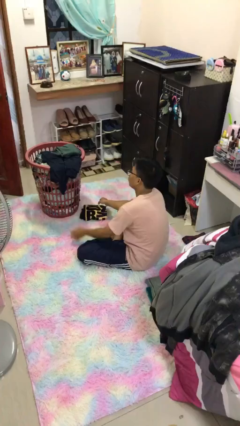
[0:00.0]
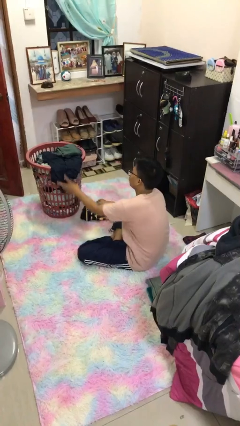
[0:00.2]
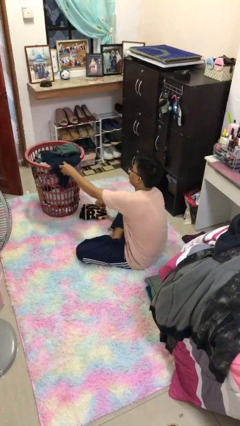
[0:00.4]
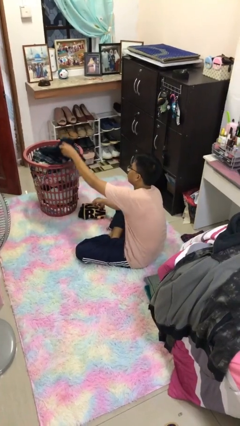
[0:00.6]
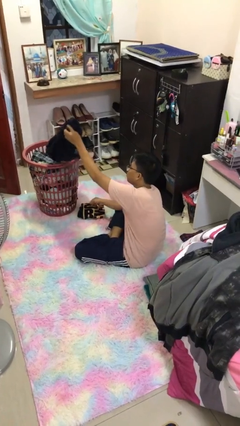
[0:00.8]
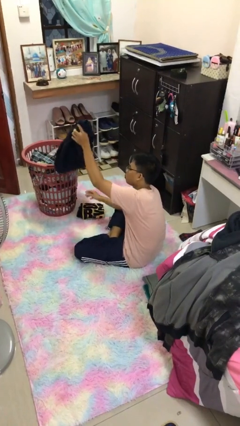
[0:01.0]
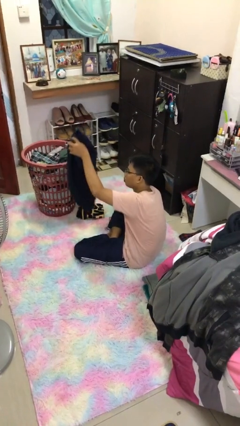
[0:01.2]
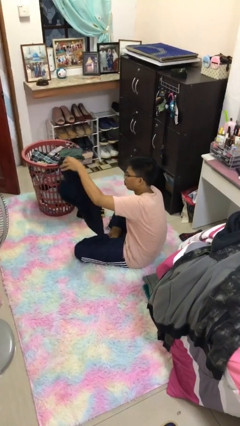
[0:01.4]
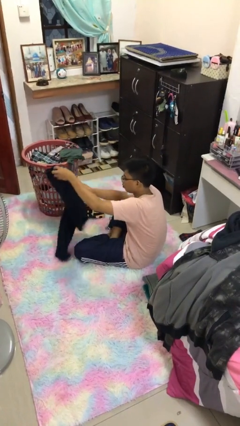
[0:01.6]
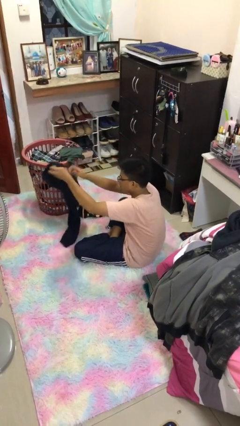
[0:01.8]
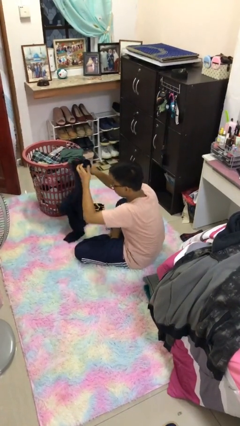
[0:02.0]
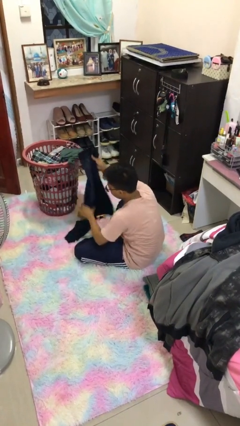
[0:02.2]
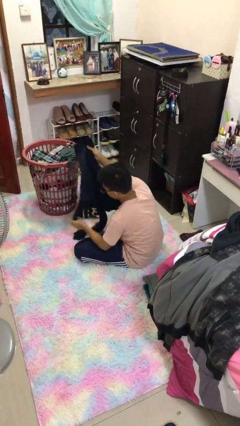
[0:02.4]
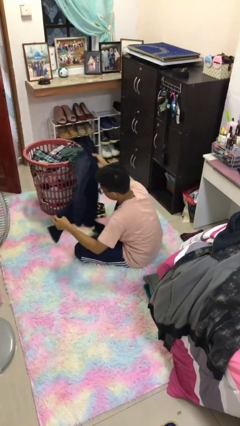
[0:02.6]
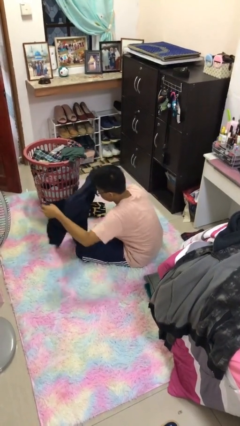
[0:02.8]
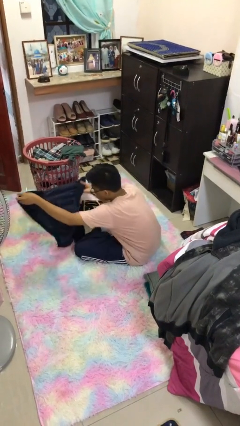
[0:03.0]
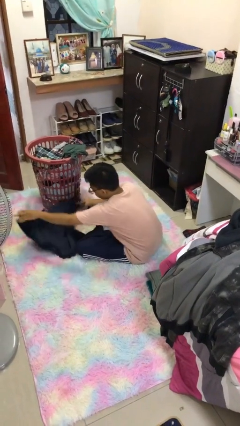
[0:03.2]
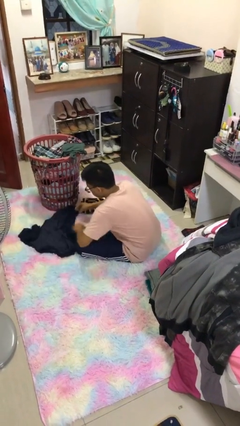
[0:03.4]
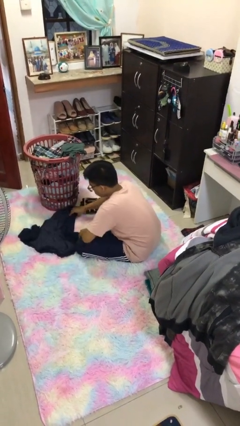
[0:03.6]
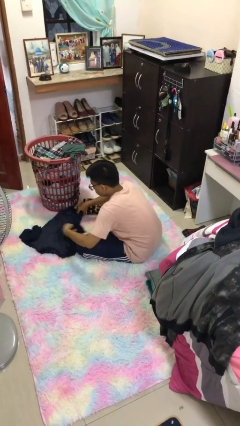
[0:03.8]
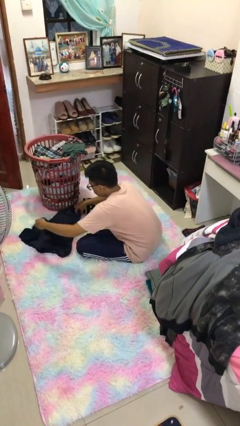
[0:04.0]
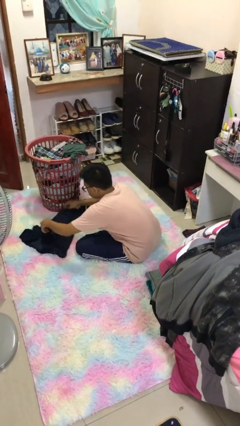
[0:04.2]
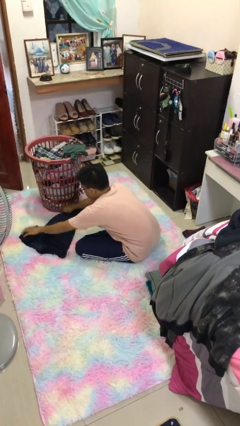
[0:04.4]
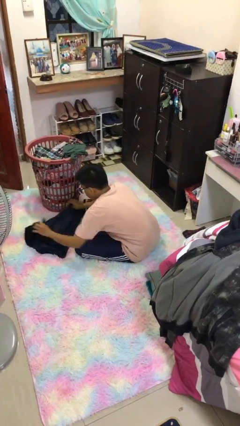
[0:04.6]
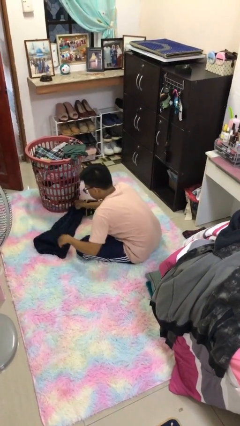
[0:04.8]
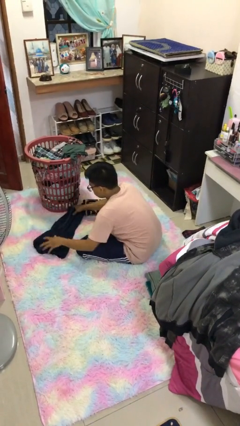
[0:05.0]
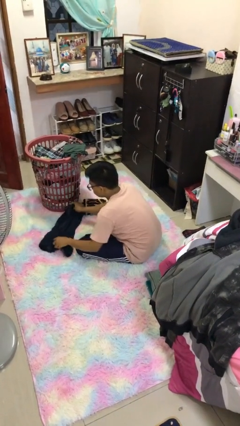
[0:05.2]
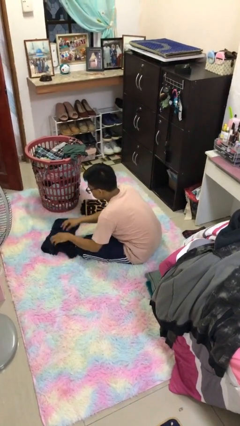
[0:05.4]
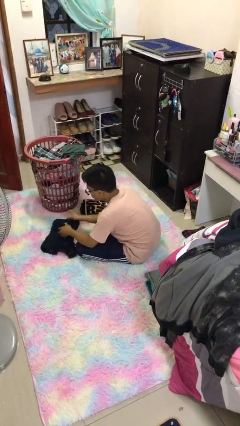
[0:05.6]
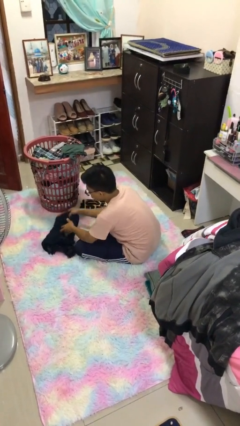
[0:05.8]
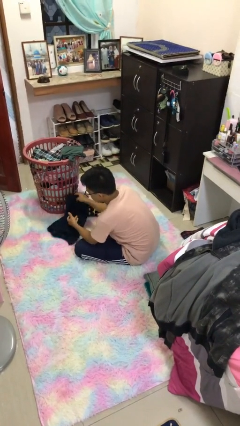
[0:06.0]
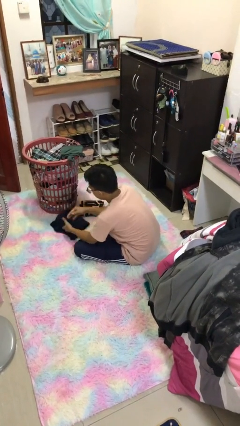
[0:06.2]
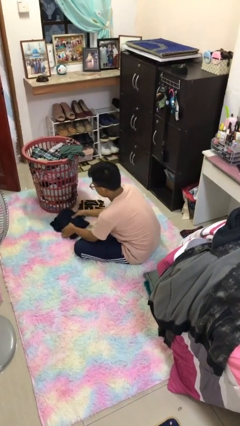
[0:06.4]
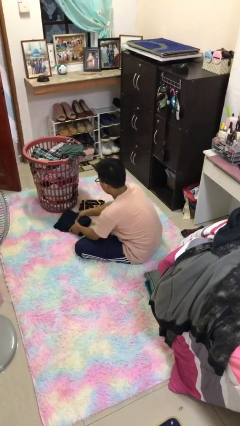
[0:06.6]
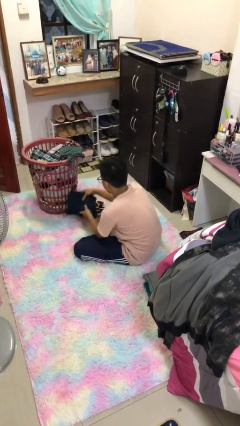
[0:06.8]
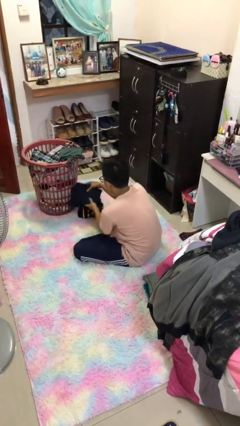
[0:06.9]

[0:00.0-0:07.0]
person folds shirt

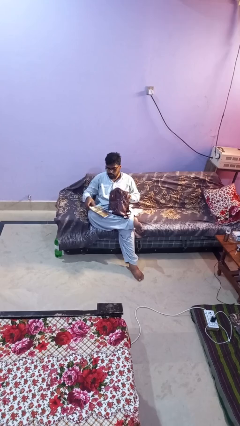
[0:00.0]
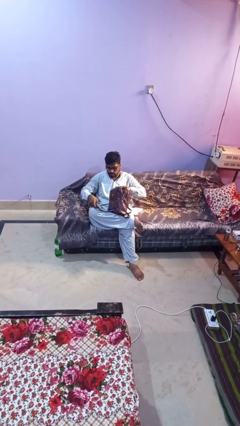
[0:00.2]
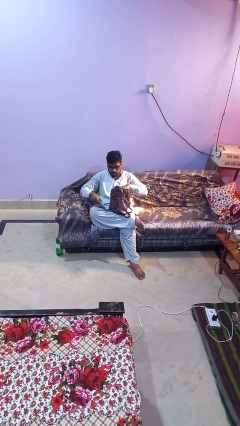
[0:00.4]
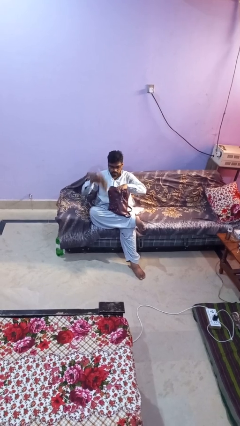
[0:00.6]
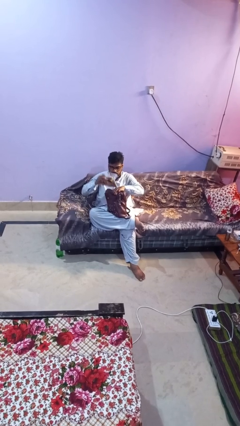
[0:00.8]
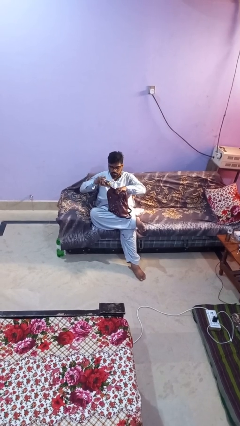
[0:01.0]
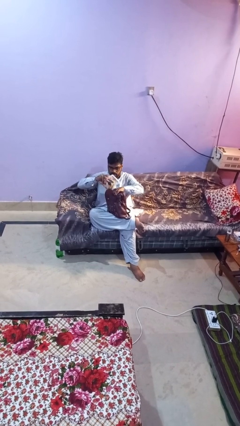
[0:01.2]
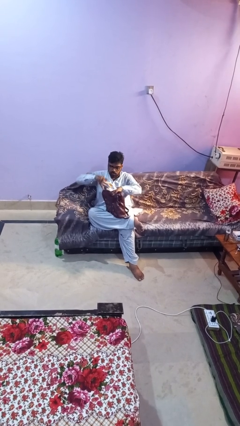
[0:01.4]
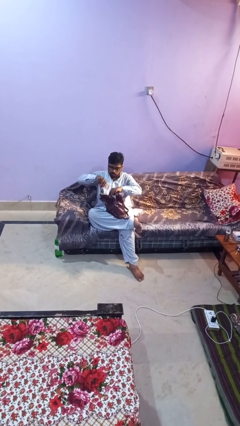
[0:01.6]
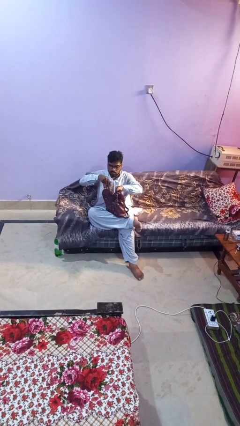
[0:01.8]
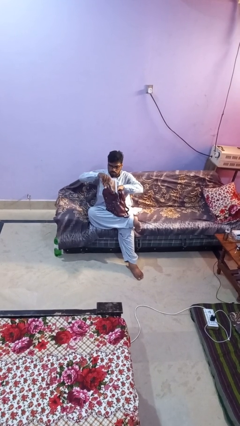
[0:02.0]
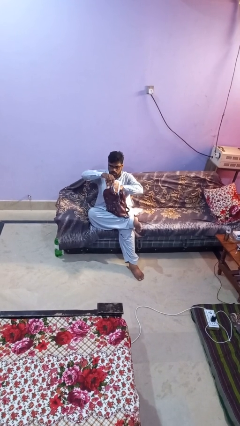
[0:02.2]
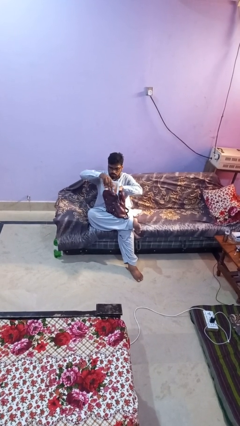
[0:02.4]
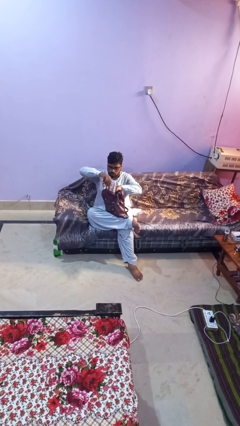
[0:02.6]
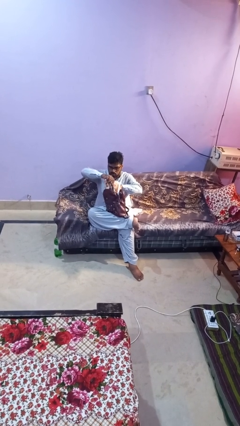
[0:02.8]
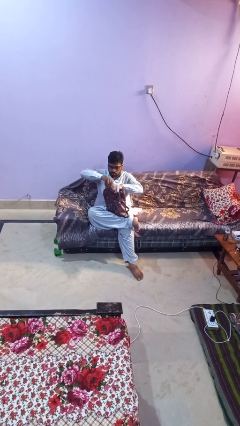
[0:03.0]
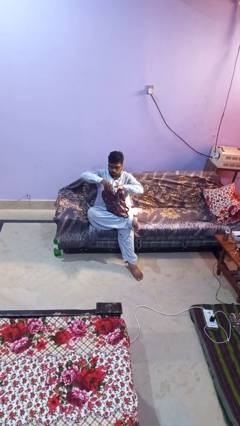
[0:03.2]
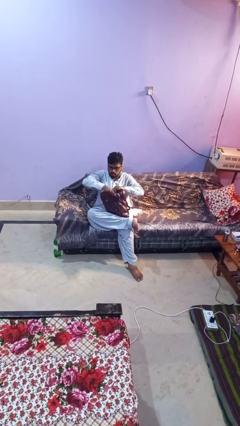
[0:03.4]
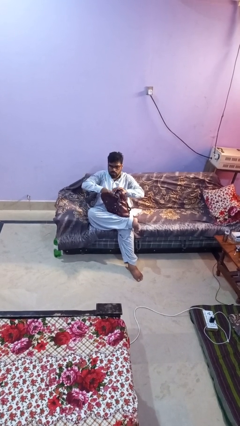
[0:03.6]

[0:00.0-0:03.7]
person puts object into backpack

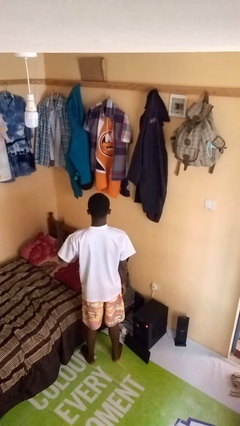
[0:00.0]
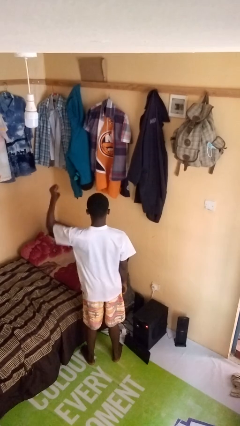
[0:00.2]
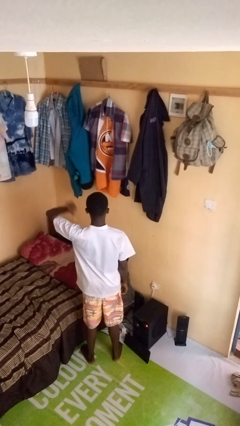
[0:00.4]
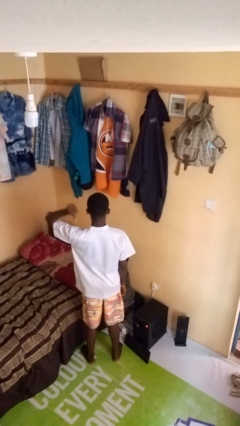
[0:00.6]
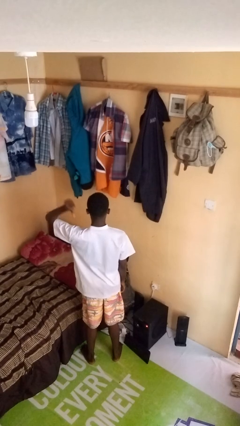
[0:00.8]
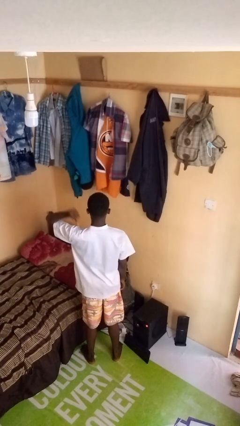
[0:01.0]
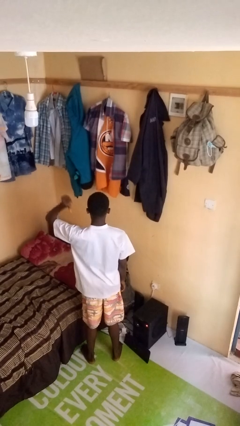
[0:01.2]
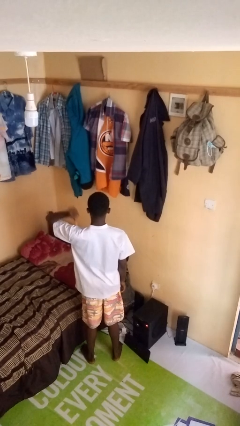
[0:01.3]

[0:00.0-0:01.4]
person gestures behind me

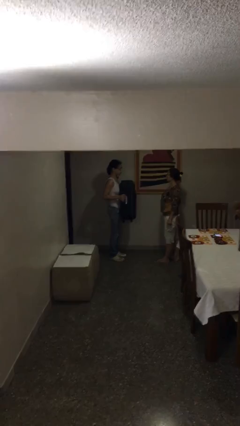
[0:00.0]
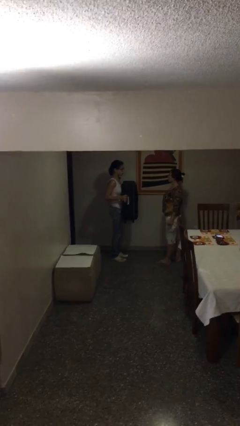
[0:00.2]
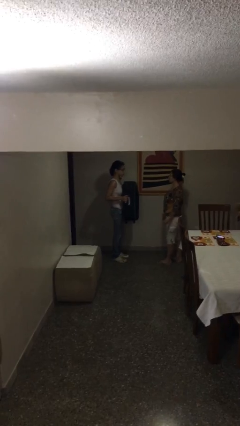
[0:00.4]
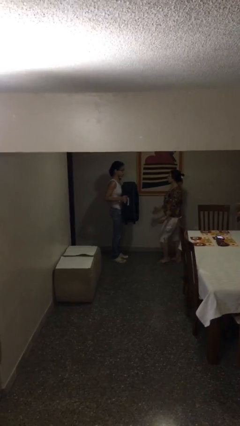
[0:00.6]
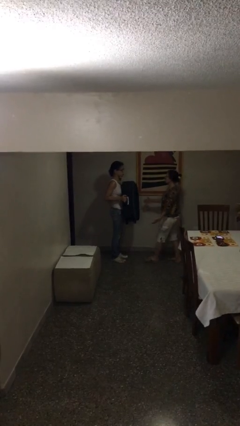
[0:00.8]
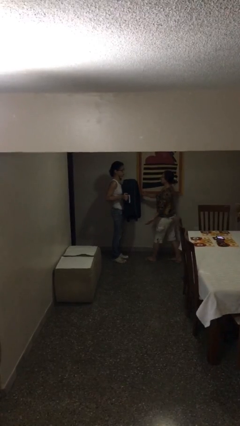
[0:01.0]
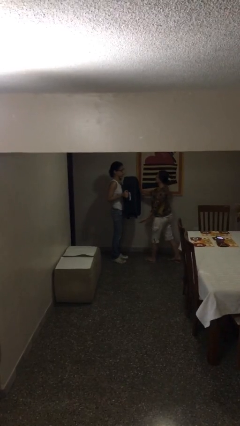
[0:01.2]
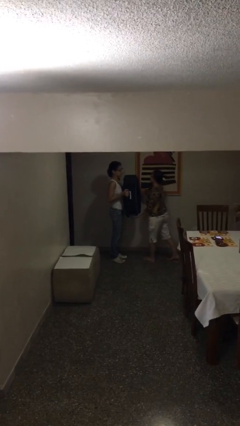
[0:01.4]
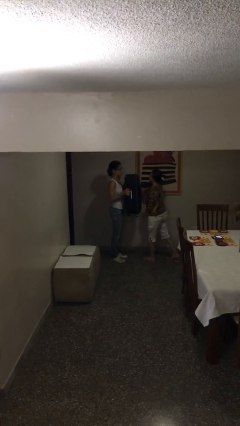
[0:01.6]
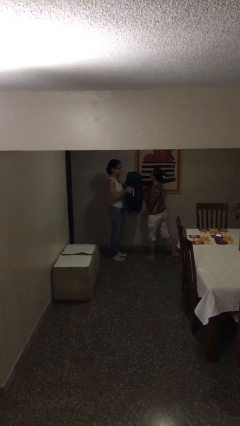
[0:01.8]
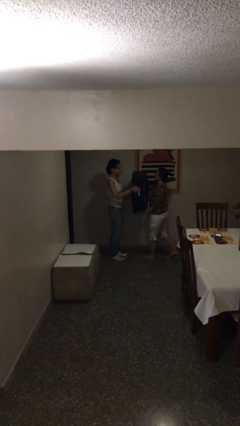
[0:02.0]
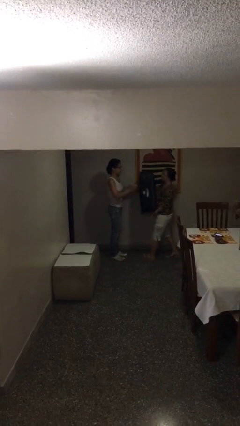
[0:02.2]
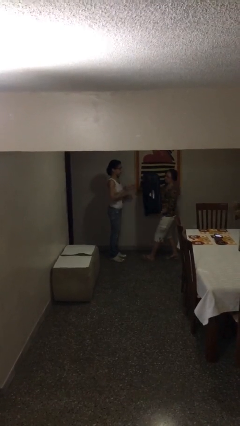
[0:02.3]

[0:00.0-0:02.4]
person transfers object to person

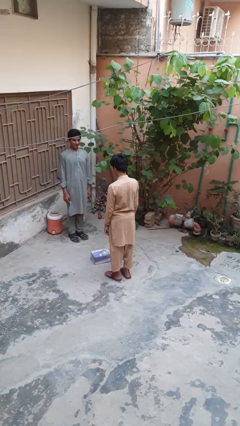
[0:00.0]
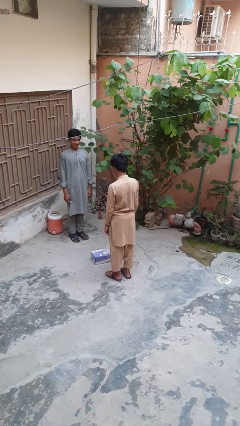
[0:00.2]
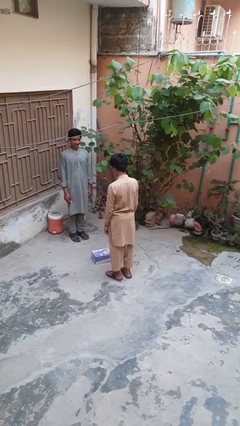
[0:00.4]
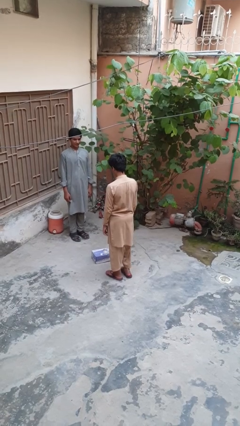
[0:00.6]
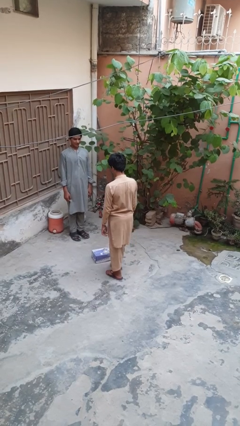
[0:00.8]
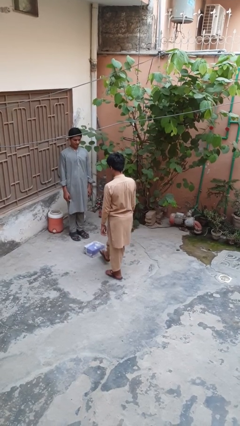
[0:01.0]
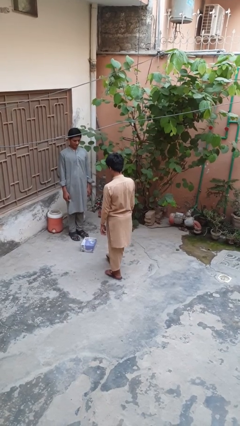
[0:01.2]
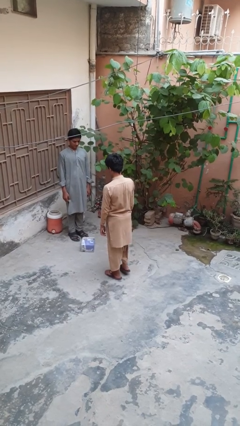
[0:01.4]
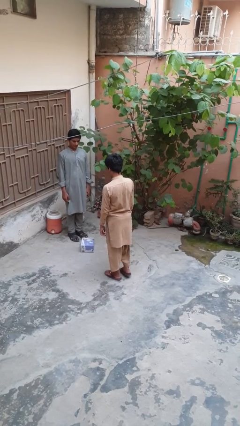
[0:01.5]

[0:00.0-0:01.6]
person kicks object to person

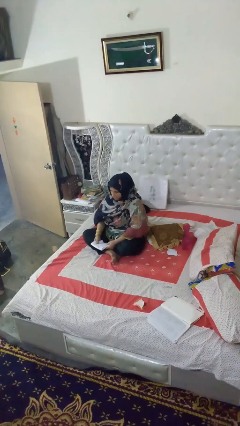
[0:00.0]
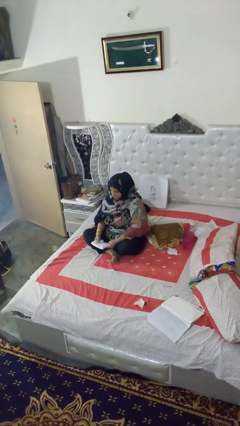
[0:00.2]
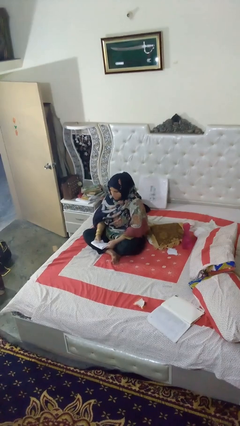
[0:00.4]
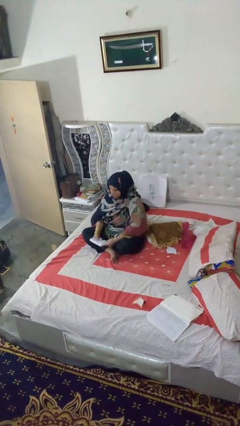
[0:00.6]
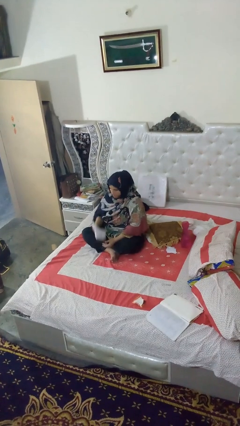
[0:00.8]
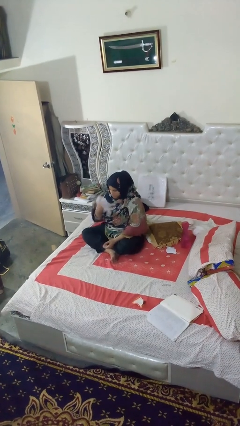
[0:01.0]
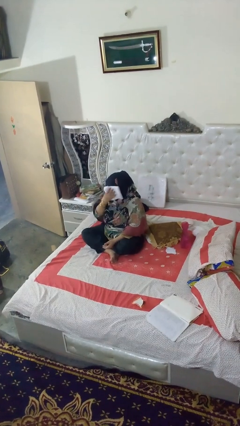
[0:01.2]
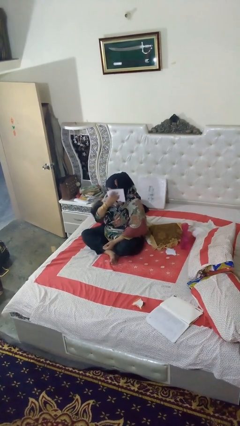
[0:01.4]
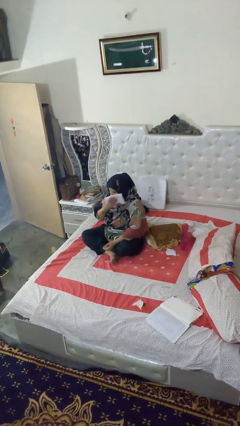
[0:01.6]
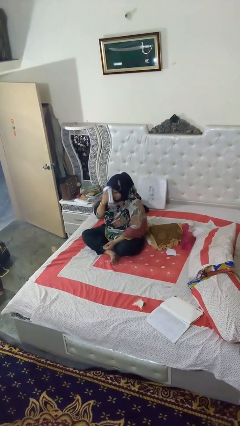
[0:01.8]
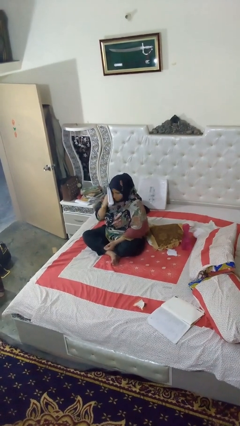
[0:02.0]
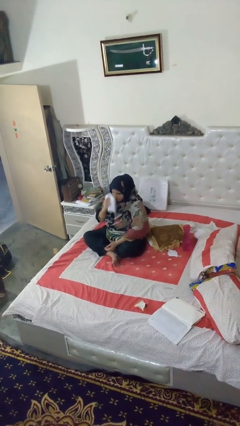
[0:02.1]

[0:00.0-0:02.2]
person wipes mouth with napkin
